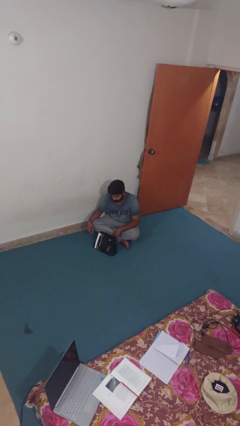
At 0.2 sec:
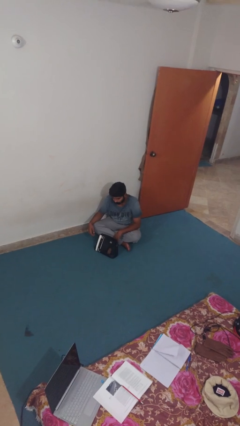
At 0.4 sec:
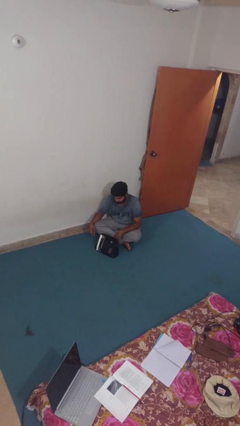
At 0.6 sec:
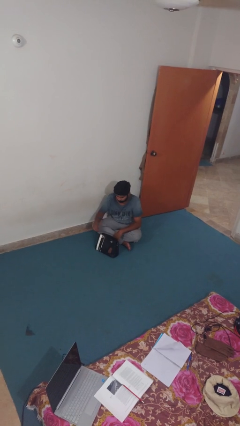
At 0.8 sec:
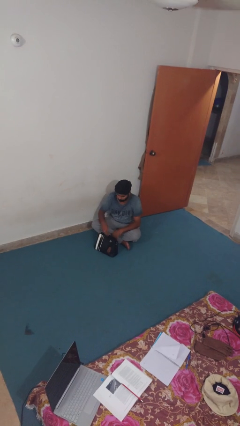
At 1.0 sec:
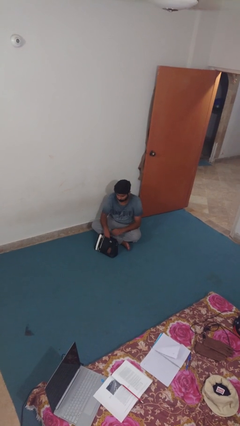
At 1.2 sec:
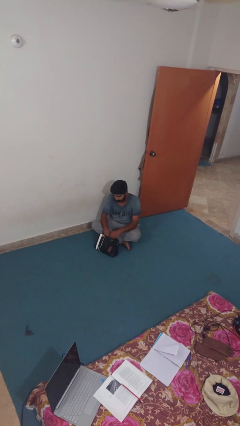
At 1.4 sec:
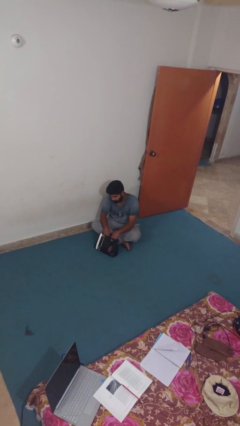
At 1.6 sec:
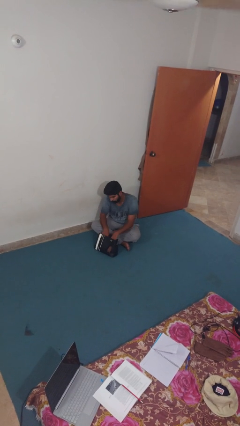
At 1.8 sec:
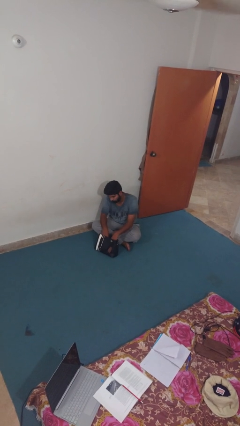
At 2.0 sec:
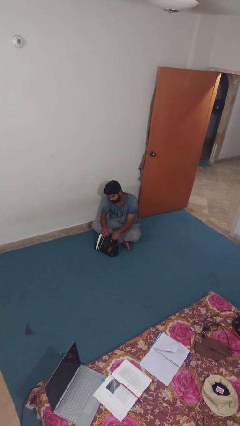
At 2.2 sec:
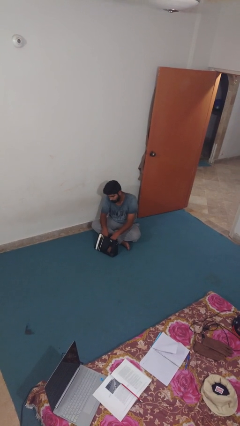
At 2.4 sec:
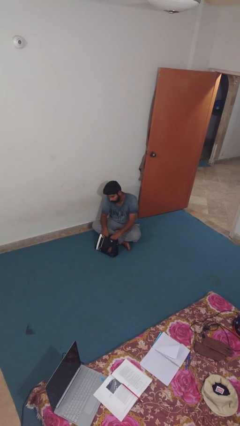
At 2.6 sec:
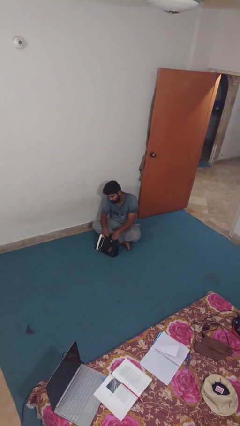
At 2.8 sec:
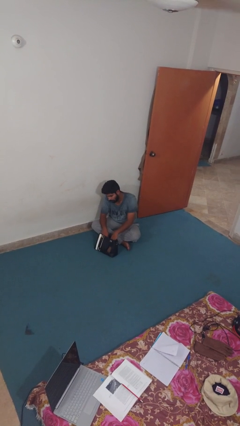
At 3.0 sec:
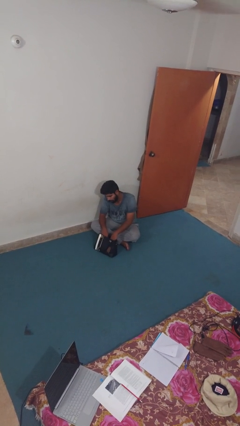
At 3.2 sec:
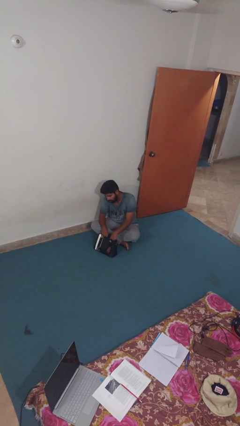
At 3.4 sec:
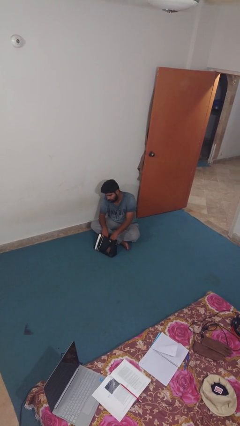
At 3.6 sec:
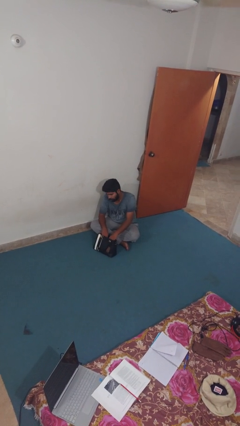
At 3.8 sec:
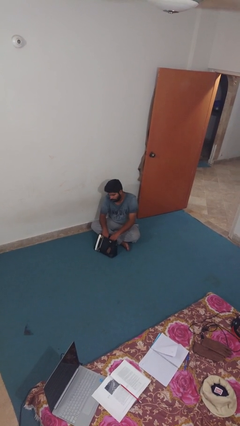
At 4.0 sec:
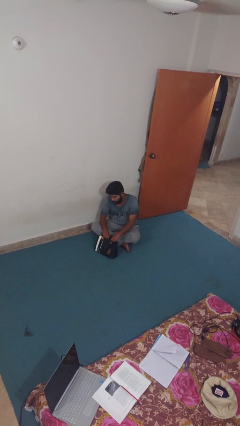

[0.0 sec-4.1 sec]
person searches in purse

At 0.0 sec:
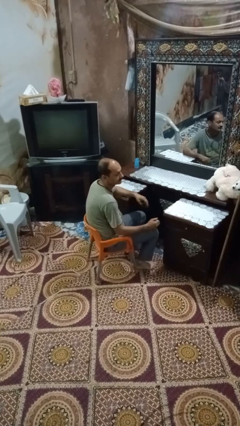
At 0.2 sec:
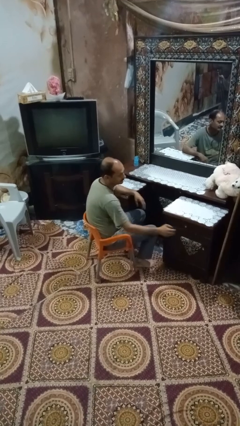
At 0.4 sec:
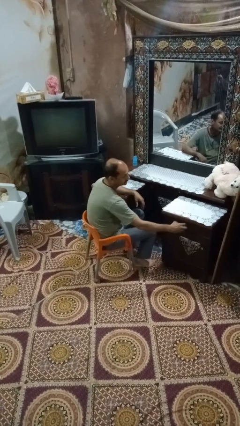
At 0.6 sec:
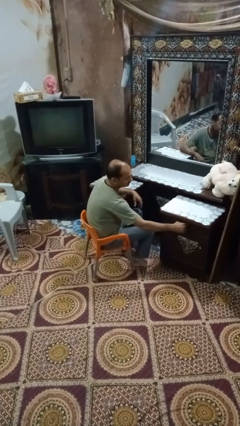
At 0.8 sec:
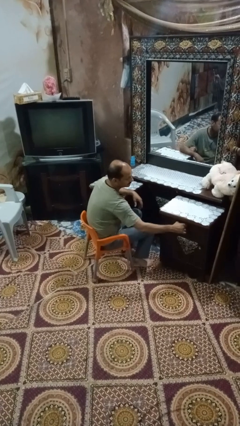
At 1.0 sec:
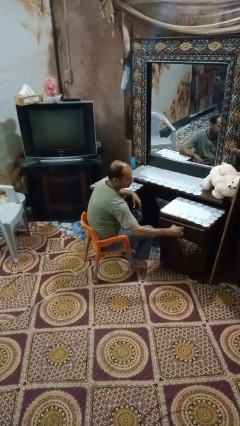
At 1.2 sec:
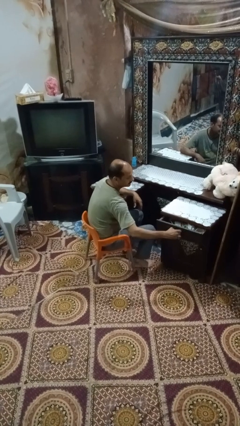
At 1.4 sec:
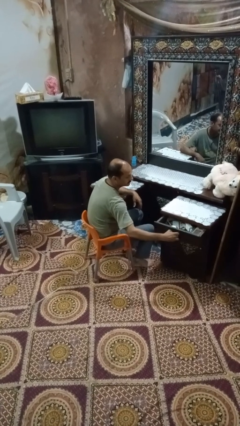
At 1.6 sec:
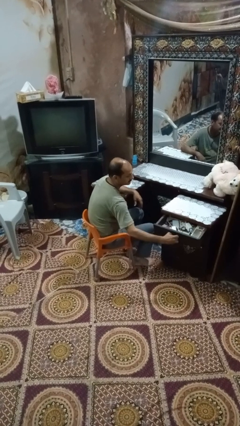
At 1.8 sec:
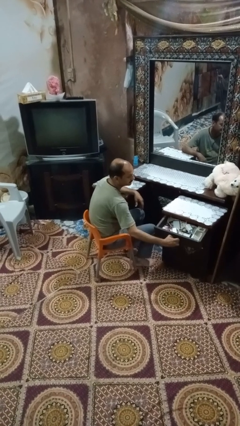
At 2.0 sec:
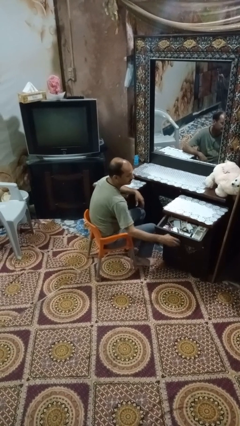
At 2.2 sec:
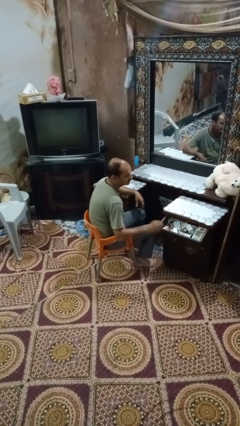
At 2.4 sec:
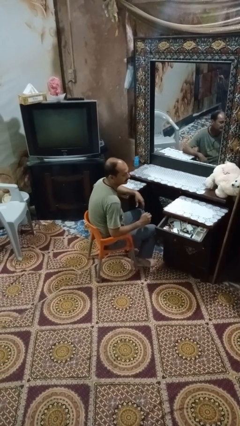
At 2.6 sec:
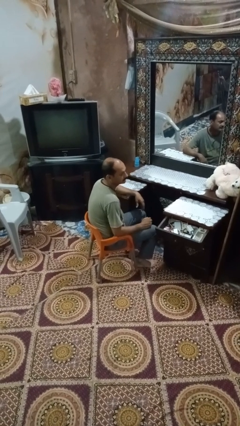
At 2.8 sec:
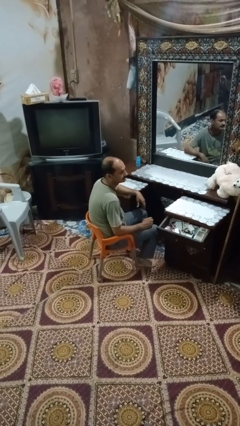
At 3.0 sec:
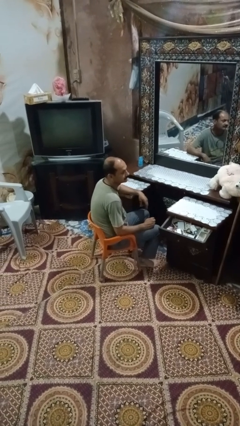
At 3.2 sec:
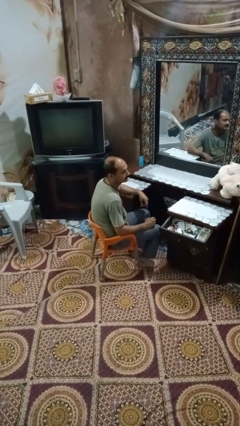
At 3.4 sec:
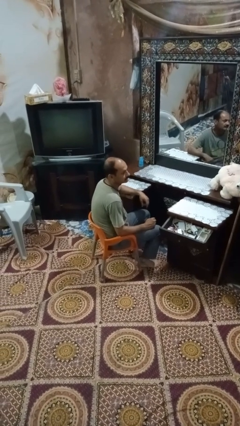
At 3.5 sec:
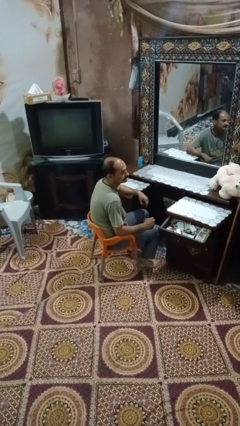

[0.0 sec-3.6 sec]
person opens dresser drawer

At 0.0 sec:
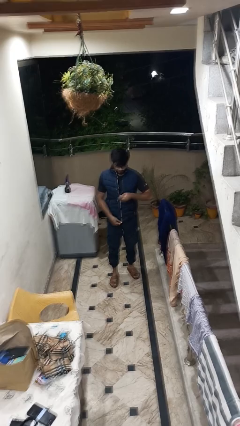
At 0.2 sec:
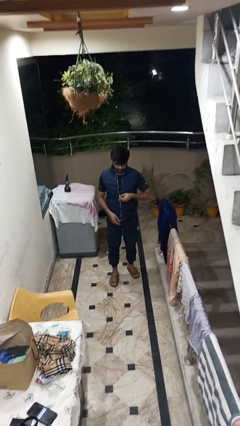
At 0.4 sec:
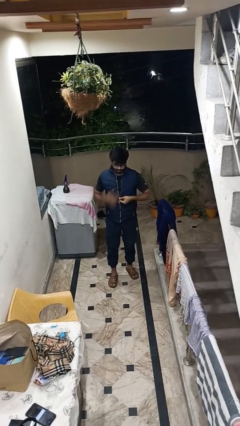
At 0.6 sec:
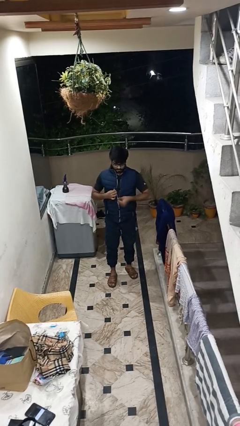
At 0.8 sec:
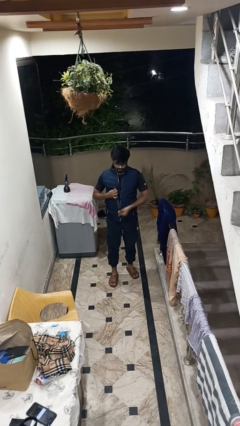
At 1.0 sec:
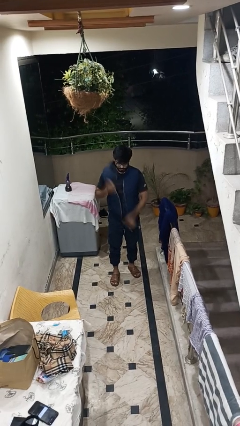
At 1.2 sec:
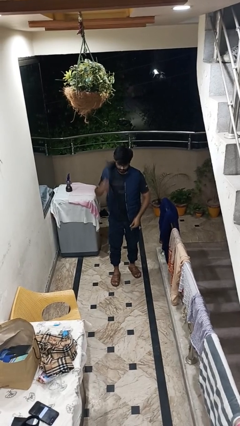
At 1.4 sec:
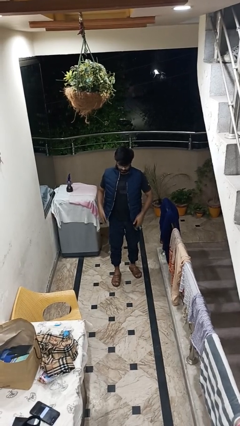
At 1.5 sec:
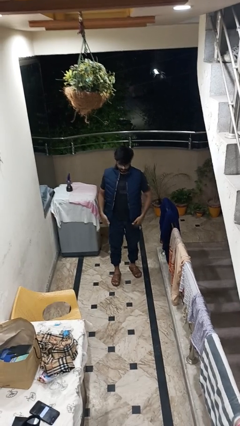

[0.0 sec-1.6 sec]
person unzips jacket

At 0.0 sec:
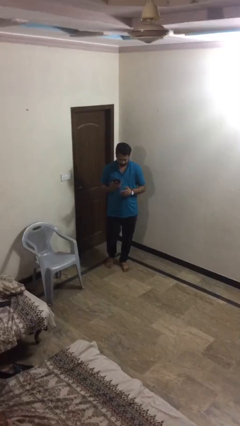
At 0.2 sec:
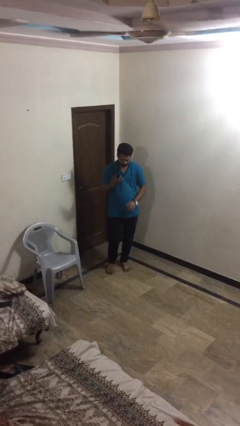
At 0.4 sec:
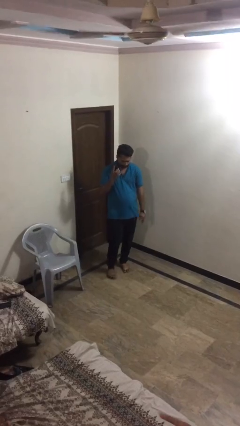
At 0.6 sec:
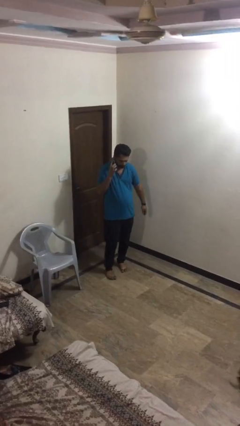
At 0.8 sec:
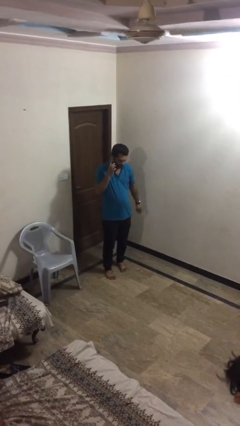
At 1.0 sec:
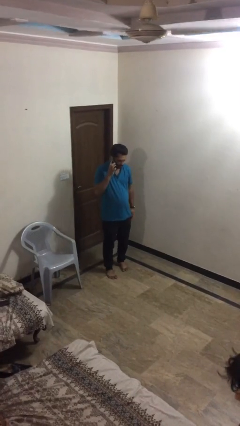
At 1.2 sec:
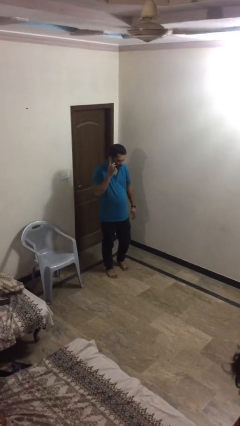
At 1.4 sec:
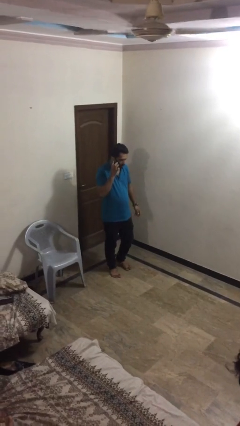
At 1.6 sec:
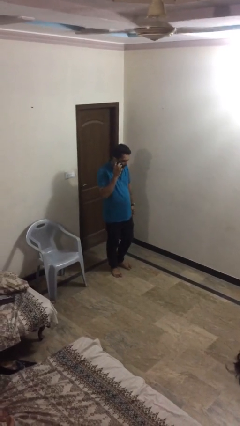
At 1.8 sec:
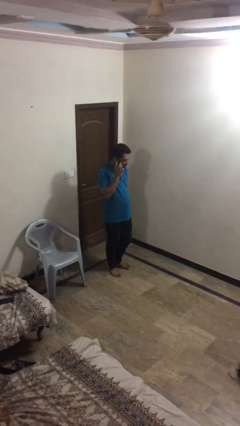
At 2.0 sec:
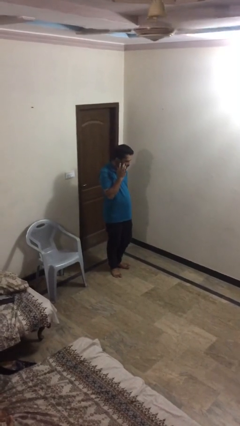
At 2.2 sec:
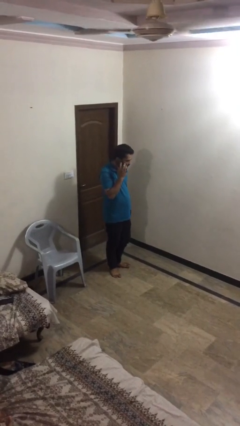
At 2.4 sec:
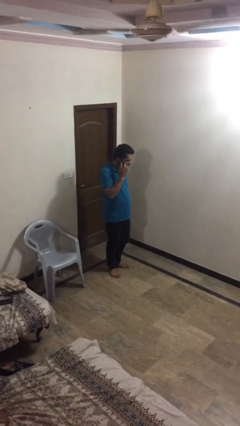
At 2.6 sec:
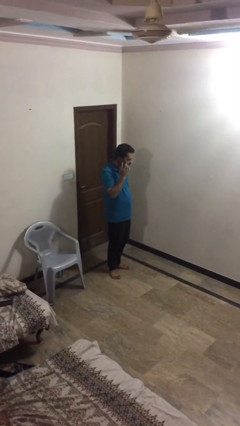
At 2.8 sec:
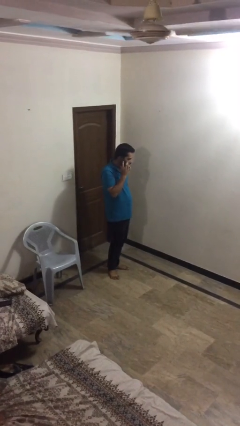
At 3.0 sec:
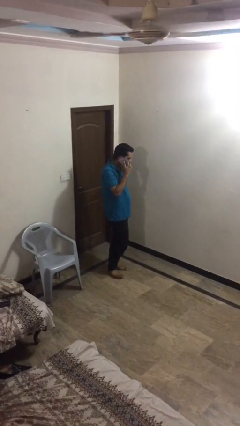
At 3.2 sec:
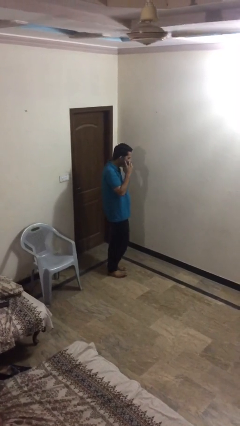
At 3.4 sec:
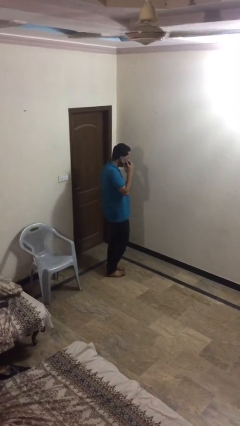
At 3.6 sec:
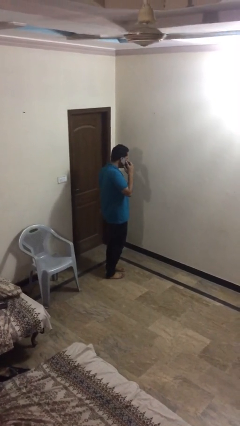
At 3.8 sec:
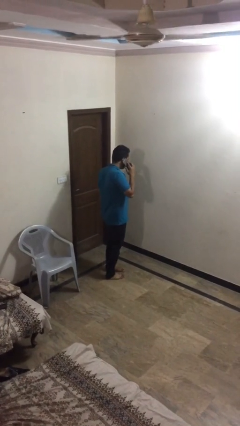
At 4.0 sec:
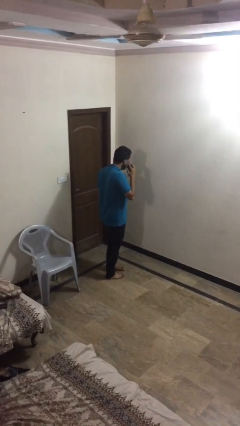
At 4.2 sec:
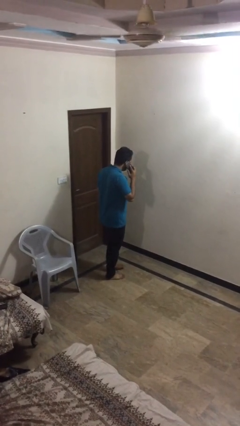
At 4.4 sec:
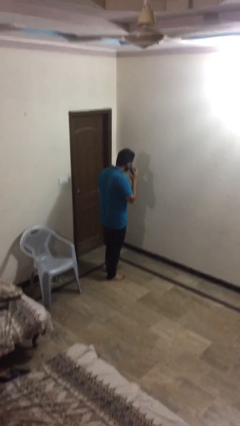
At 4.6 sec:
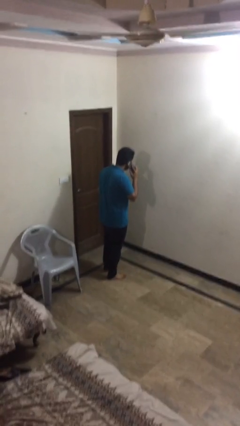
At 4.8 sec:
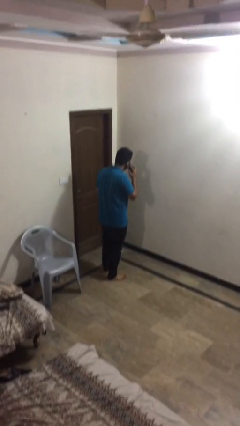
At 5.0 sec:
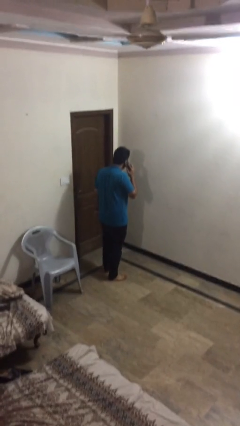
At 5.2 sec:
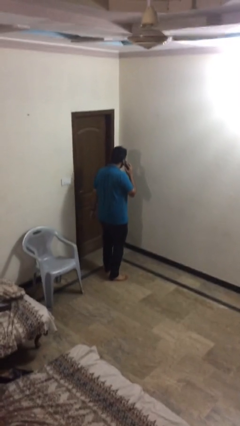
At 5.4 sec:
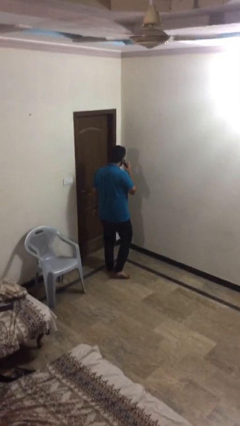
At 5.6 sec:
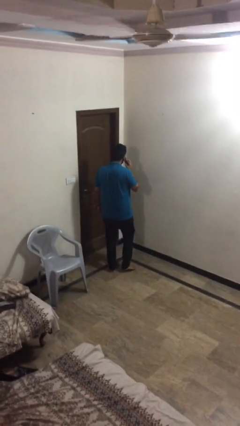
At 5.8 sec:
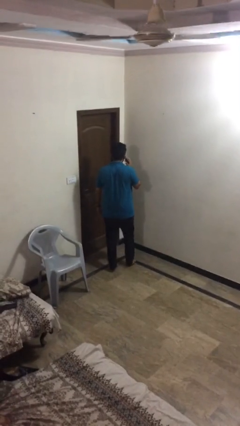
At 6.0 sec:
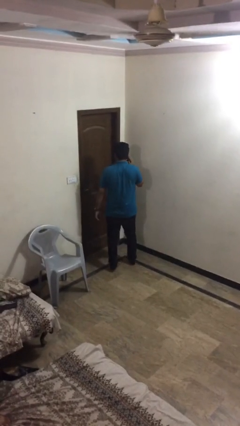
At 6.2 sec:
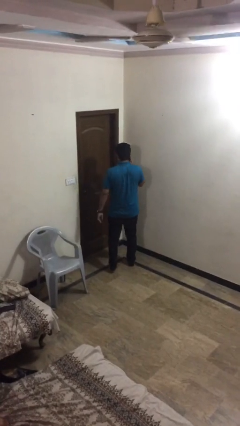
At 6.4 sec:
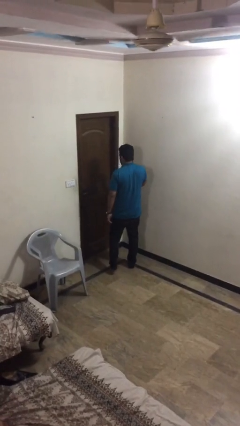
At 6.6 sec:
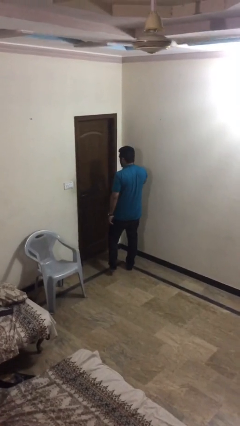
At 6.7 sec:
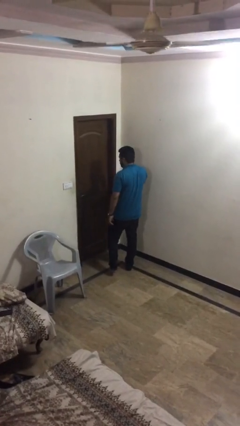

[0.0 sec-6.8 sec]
person talks on phone

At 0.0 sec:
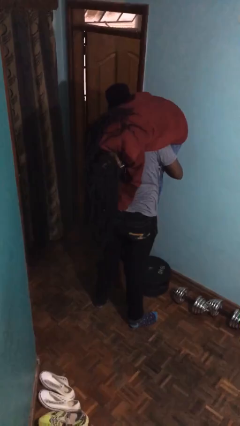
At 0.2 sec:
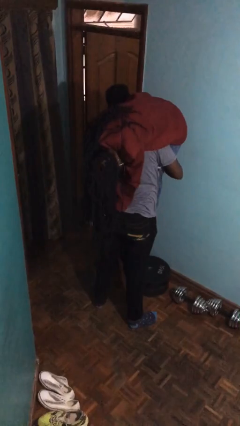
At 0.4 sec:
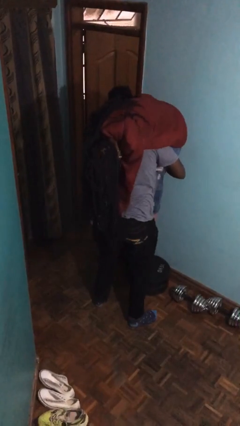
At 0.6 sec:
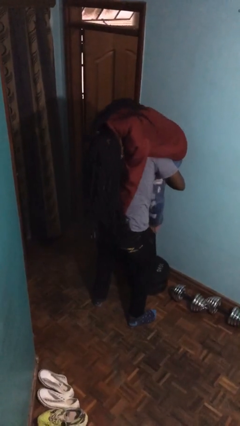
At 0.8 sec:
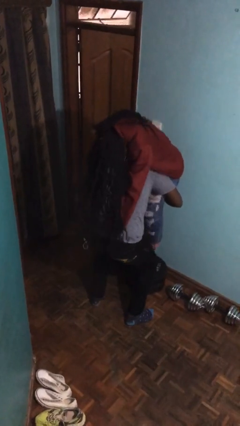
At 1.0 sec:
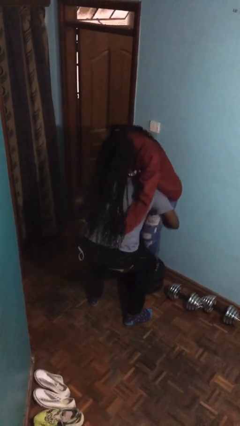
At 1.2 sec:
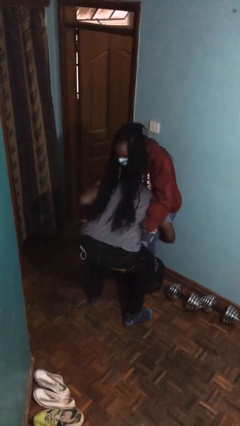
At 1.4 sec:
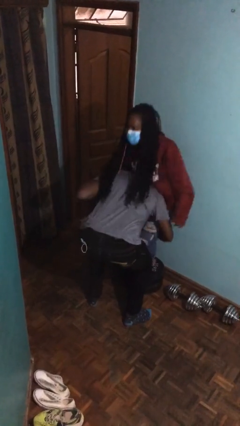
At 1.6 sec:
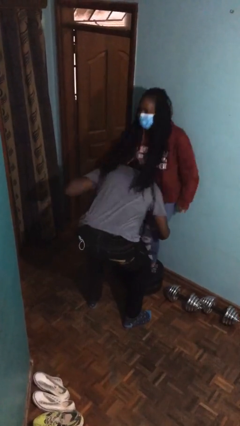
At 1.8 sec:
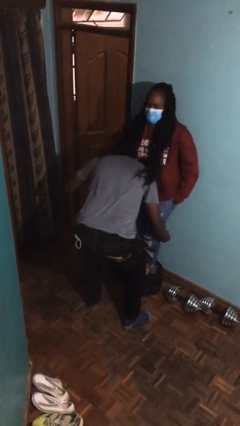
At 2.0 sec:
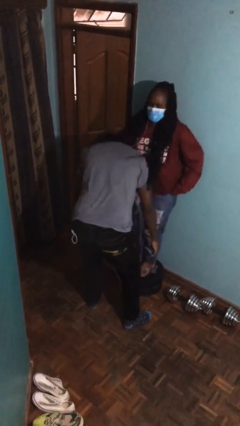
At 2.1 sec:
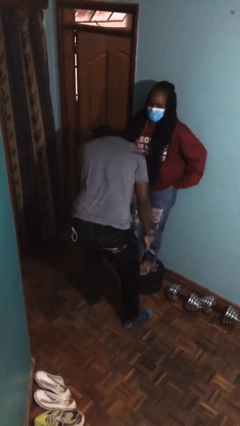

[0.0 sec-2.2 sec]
person puts down person
